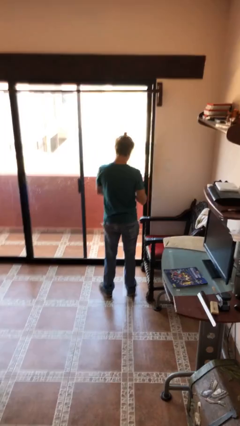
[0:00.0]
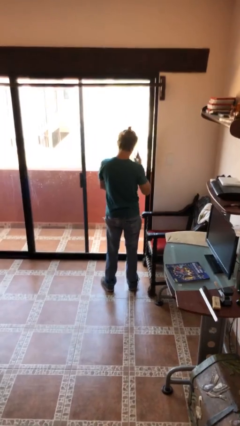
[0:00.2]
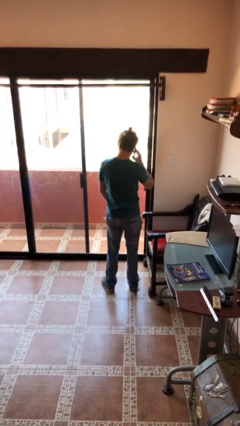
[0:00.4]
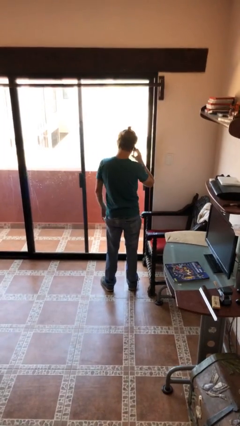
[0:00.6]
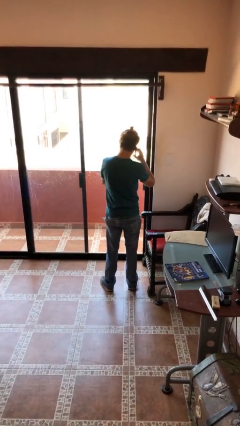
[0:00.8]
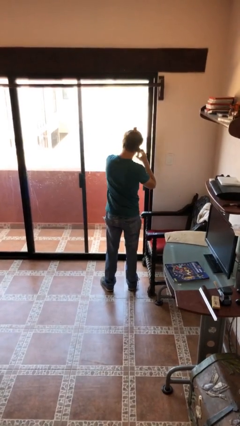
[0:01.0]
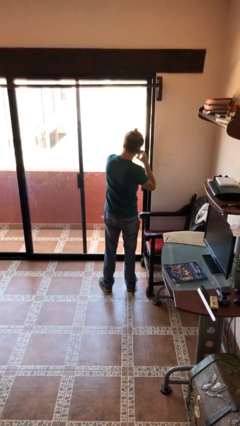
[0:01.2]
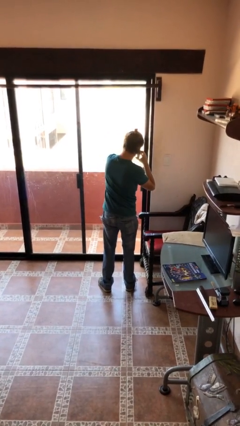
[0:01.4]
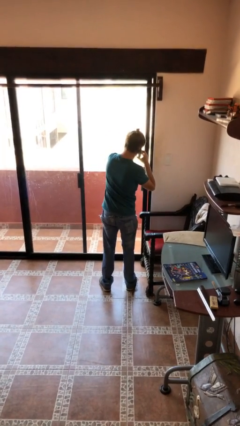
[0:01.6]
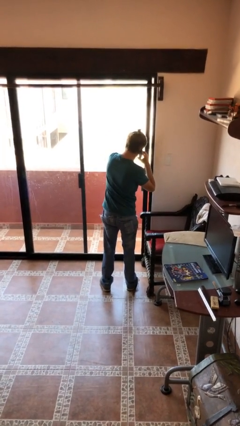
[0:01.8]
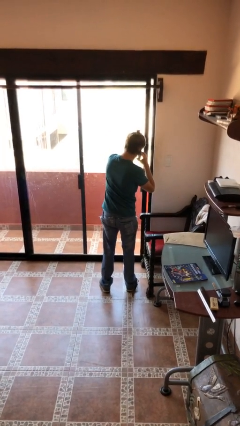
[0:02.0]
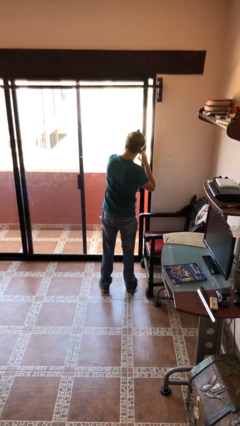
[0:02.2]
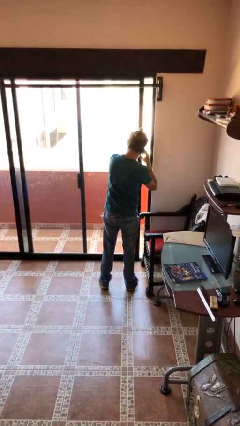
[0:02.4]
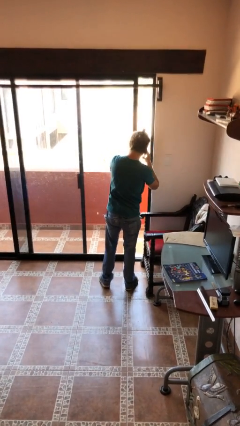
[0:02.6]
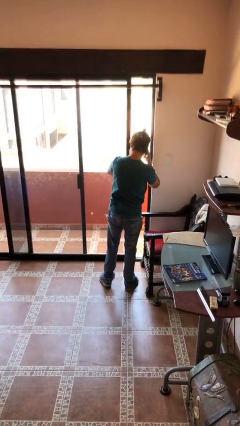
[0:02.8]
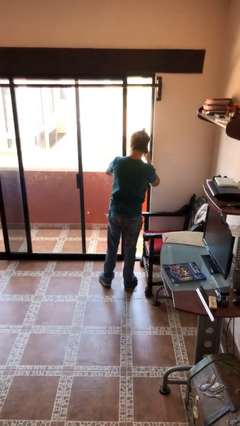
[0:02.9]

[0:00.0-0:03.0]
person opens facility door

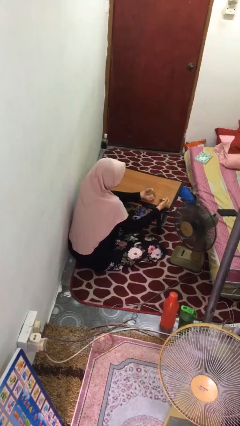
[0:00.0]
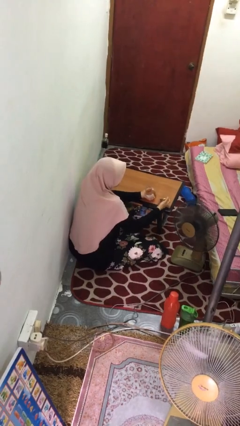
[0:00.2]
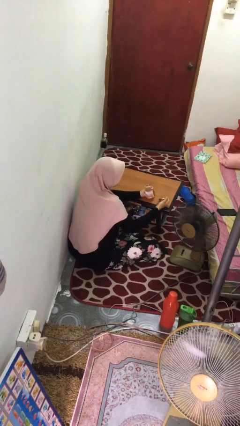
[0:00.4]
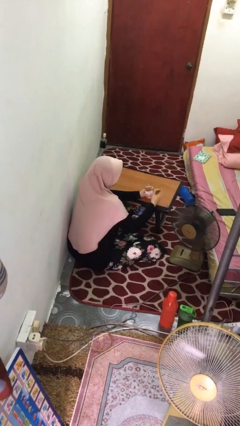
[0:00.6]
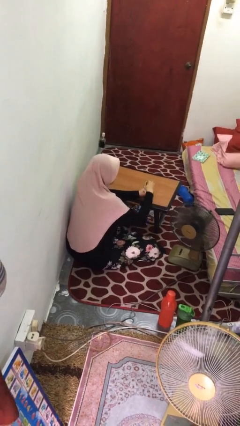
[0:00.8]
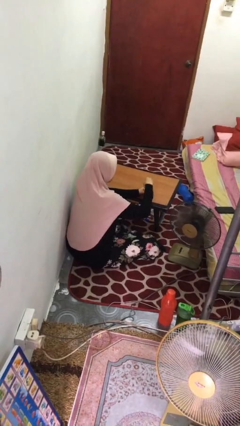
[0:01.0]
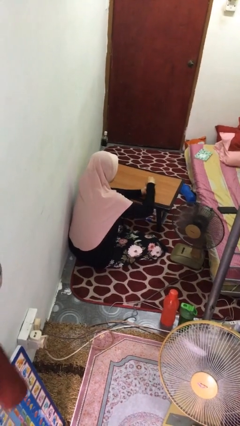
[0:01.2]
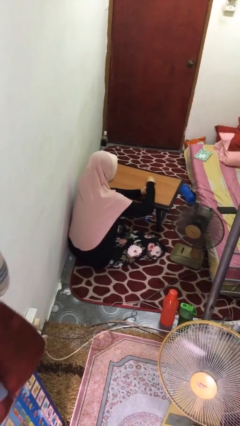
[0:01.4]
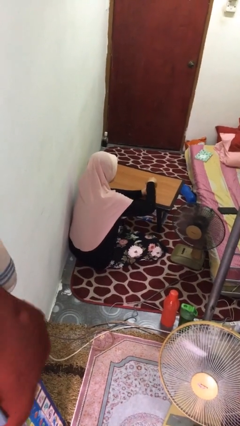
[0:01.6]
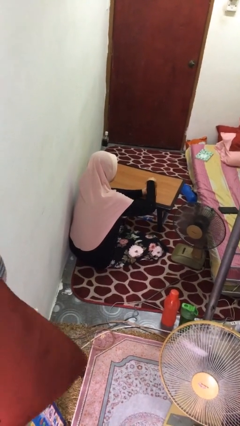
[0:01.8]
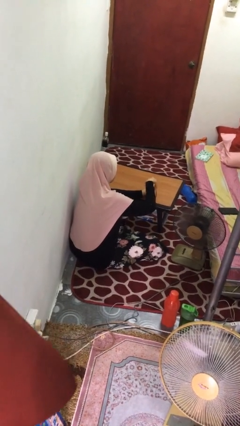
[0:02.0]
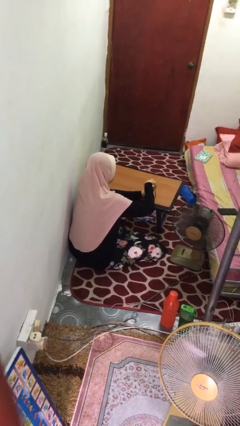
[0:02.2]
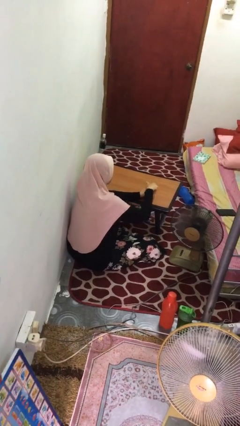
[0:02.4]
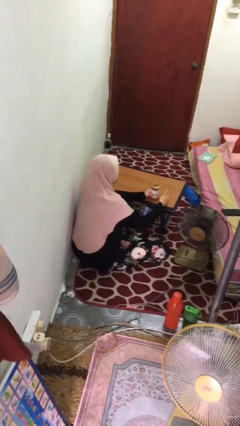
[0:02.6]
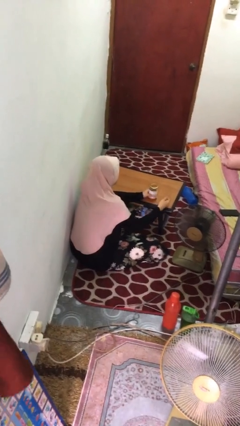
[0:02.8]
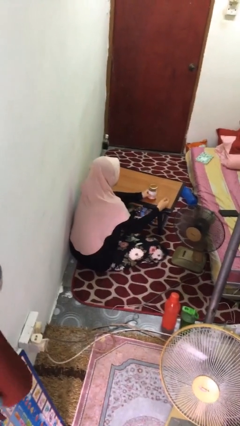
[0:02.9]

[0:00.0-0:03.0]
person closes jar

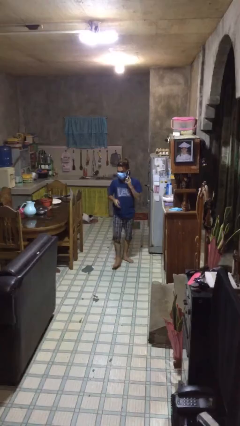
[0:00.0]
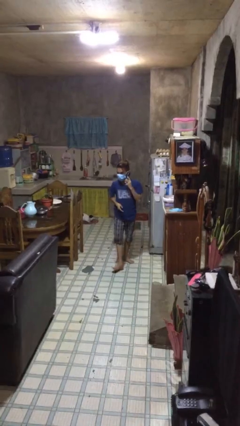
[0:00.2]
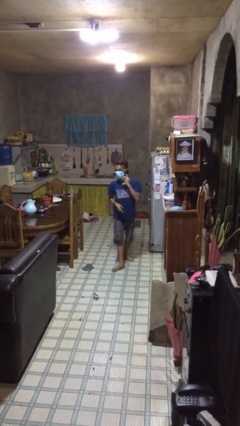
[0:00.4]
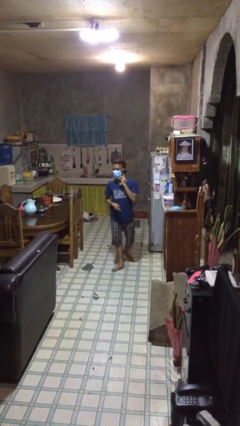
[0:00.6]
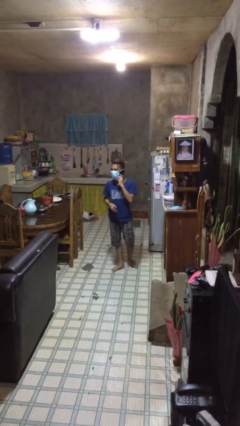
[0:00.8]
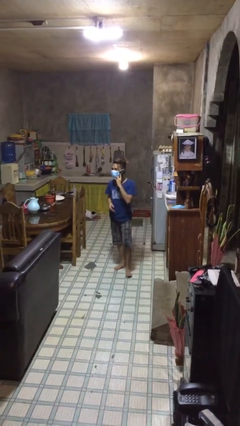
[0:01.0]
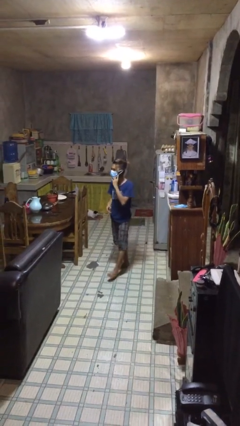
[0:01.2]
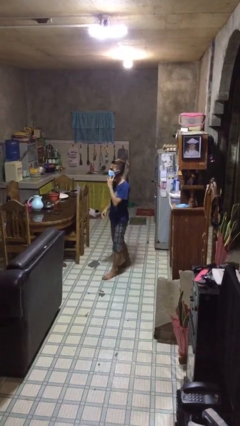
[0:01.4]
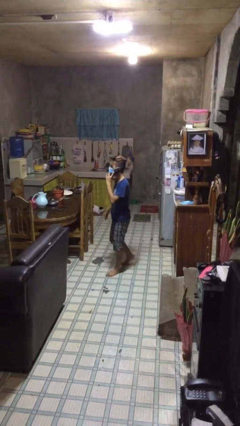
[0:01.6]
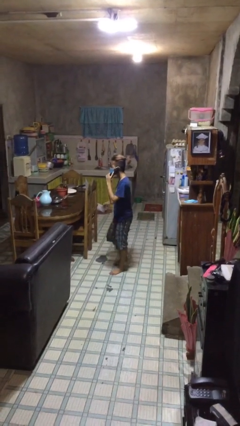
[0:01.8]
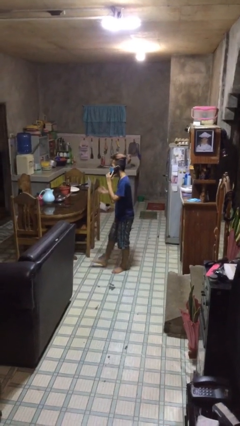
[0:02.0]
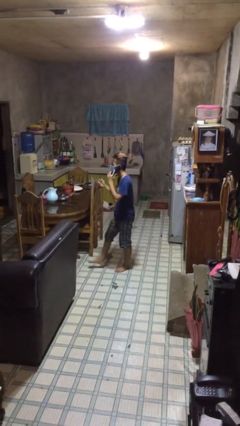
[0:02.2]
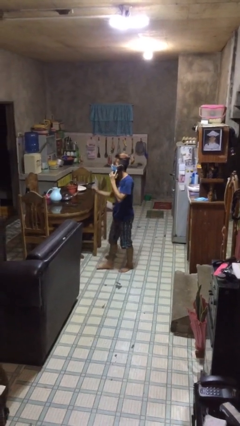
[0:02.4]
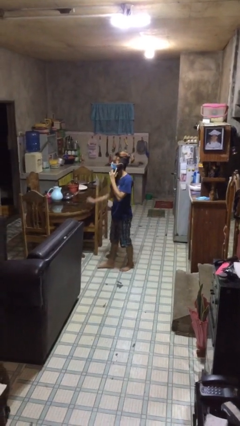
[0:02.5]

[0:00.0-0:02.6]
person talks on phone

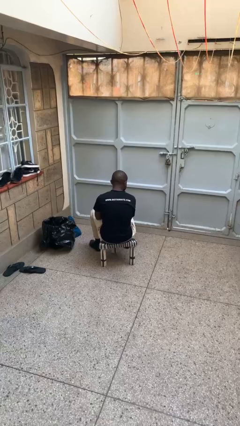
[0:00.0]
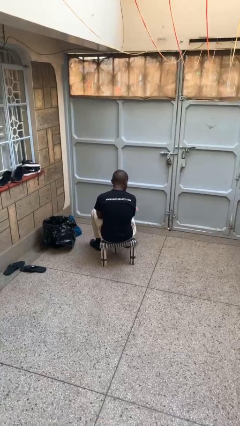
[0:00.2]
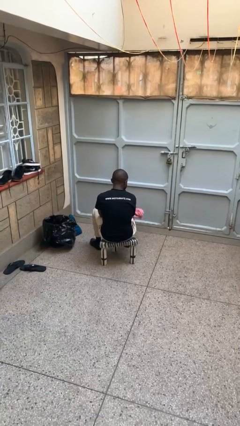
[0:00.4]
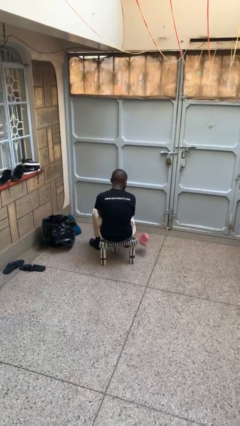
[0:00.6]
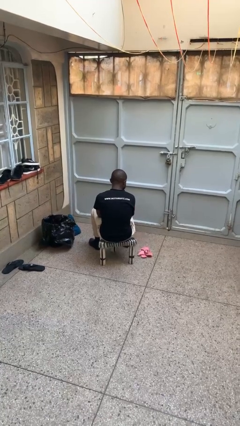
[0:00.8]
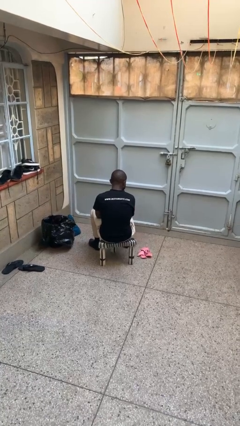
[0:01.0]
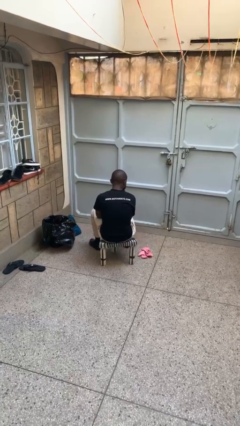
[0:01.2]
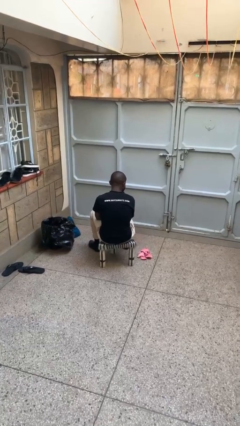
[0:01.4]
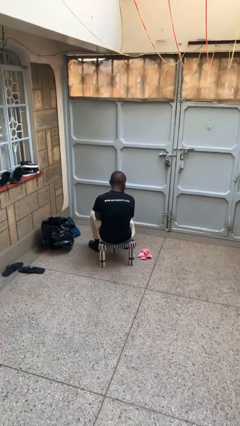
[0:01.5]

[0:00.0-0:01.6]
person throws object on table

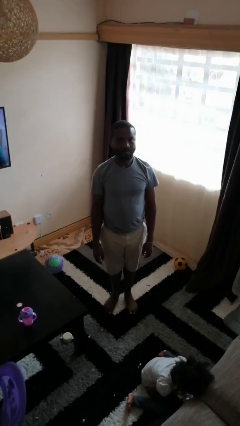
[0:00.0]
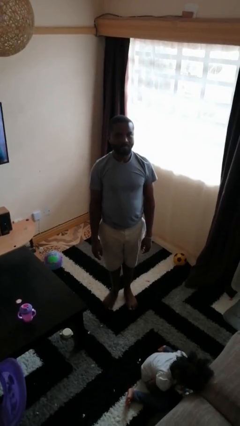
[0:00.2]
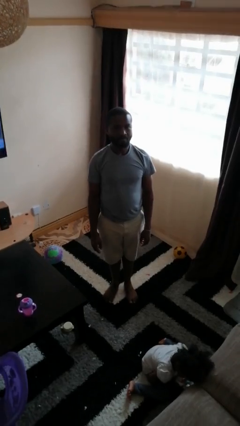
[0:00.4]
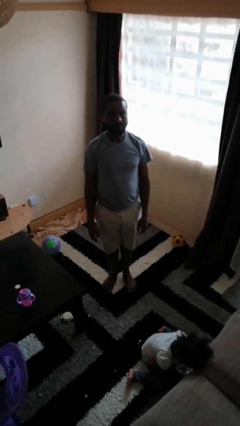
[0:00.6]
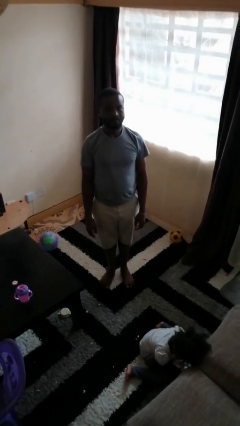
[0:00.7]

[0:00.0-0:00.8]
person falls while standing

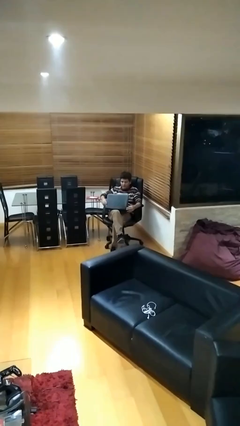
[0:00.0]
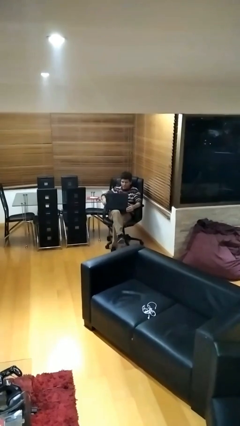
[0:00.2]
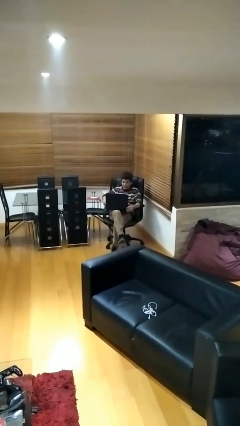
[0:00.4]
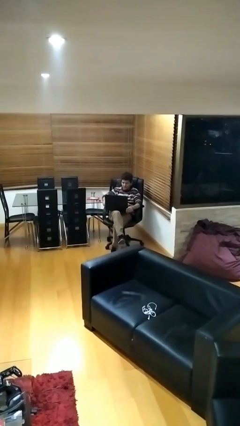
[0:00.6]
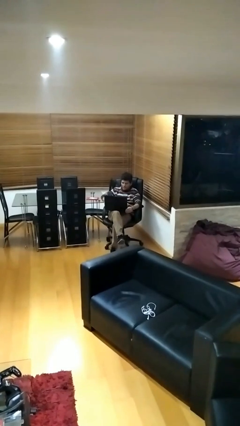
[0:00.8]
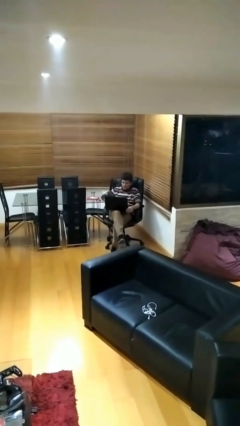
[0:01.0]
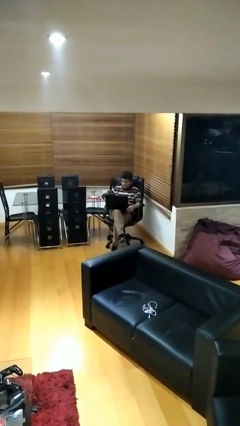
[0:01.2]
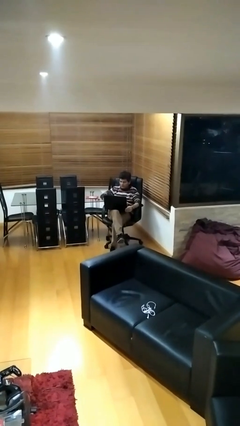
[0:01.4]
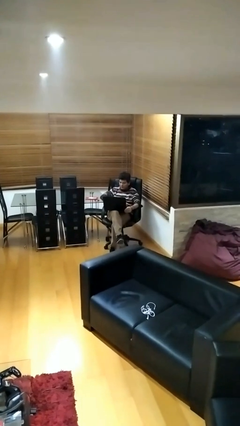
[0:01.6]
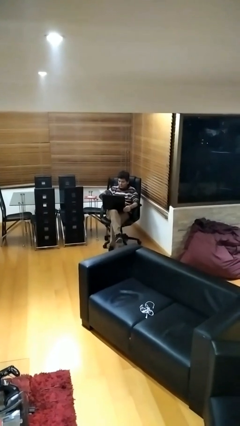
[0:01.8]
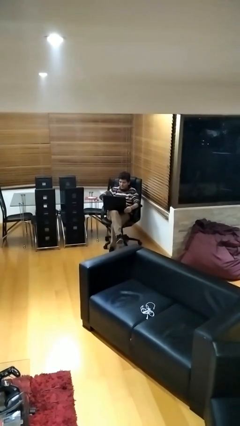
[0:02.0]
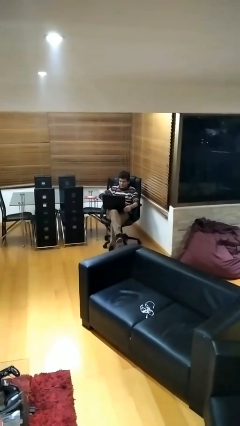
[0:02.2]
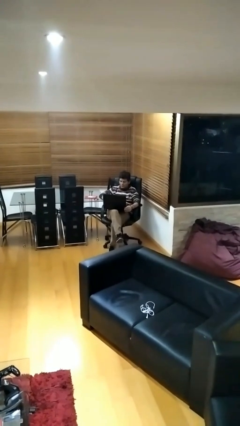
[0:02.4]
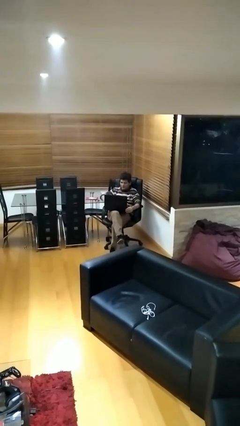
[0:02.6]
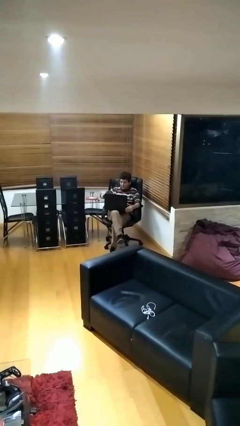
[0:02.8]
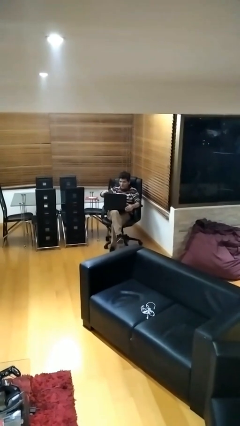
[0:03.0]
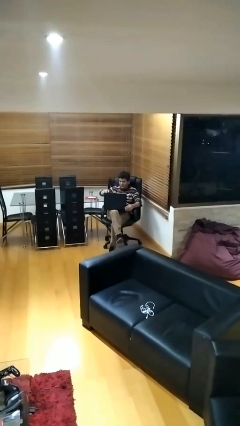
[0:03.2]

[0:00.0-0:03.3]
person interacts with laptop

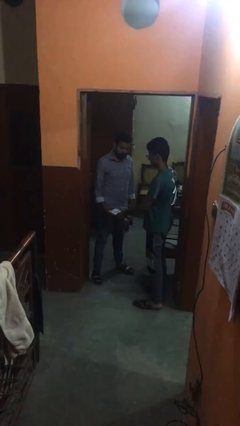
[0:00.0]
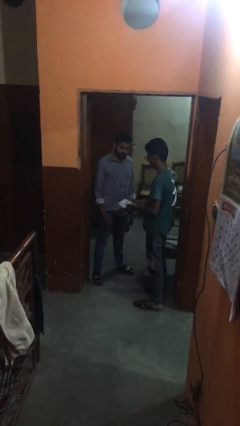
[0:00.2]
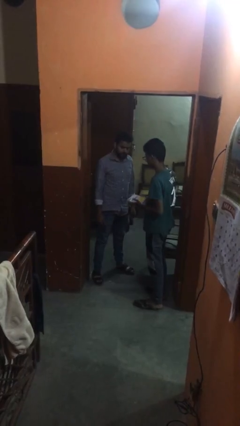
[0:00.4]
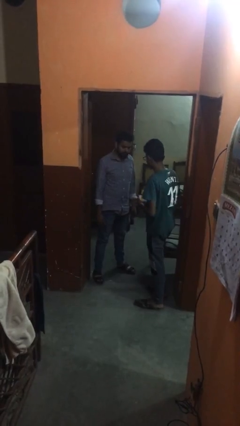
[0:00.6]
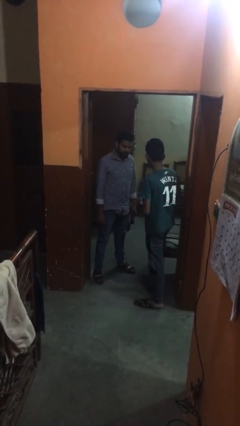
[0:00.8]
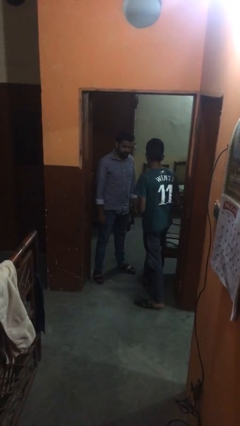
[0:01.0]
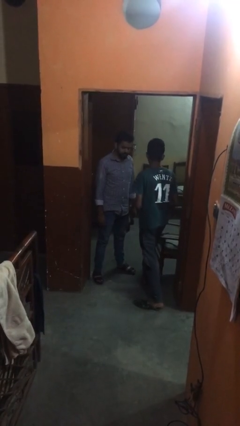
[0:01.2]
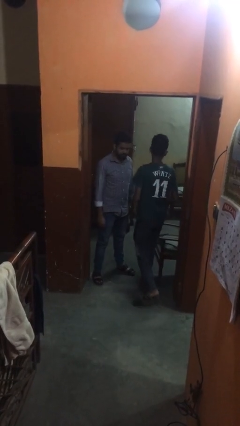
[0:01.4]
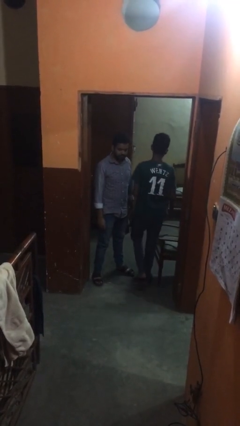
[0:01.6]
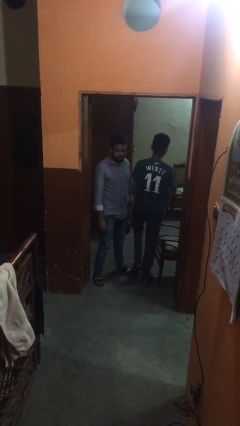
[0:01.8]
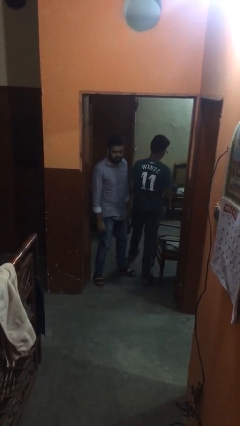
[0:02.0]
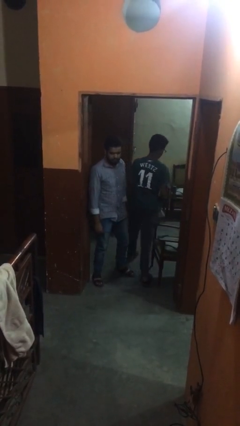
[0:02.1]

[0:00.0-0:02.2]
person transfers object to person

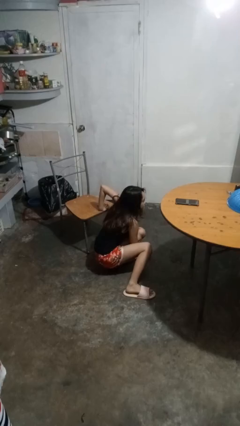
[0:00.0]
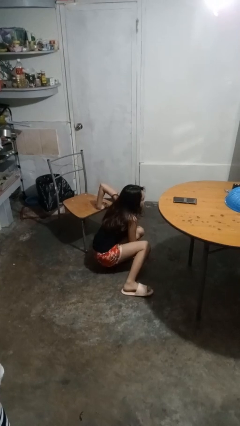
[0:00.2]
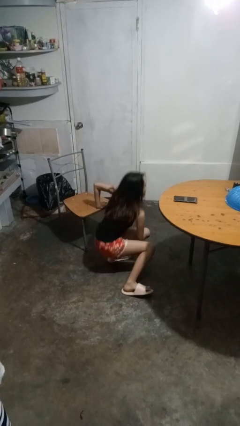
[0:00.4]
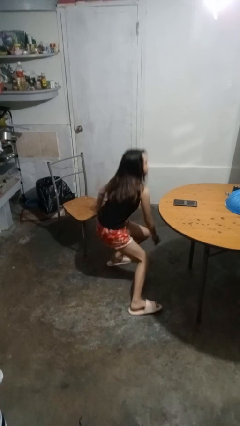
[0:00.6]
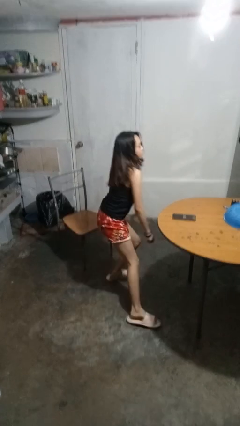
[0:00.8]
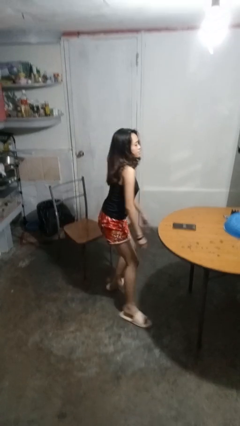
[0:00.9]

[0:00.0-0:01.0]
person stands up from floor
